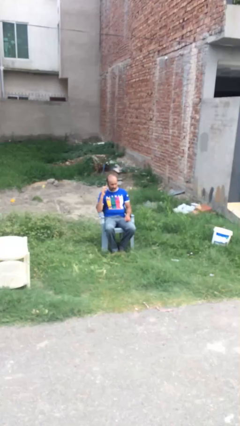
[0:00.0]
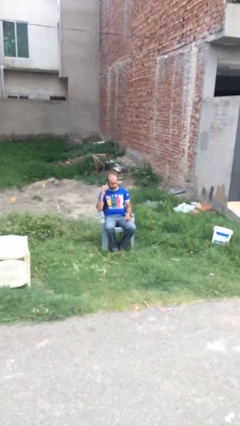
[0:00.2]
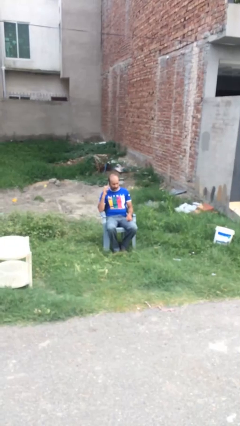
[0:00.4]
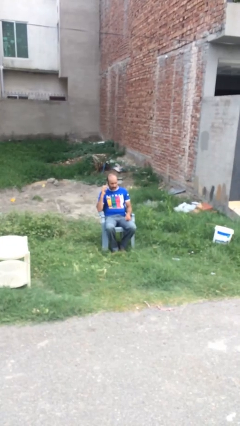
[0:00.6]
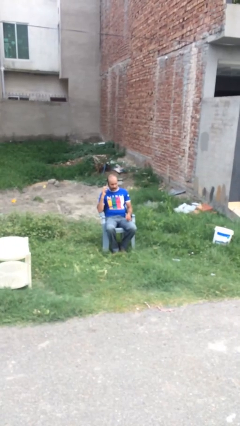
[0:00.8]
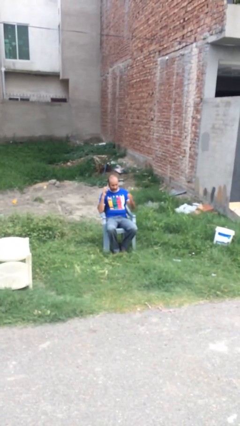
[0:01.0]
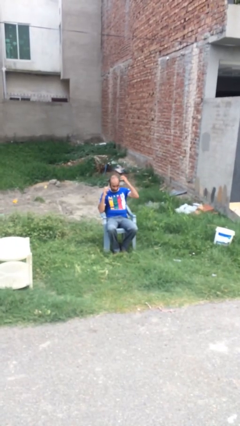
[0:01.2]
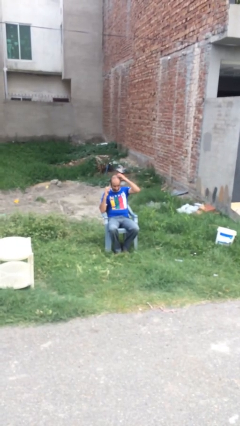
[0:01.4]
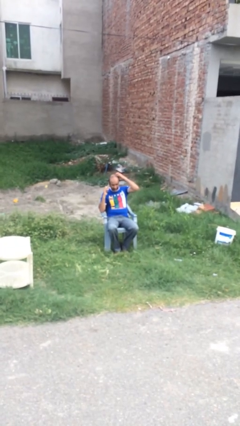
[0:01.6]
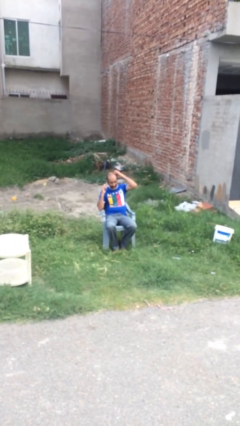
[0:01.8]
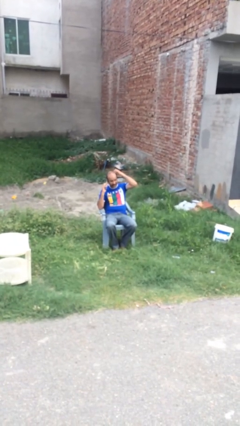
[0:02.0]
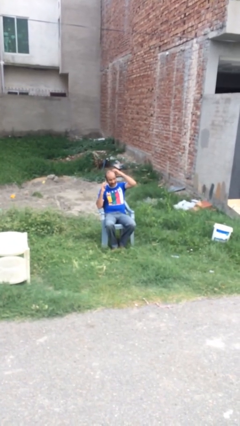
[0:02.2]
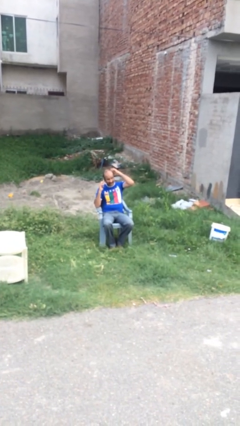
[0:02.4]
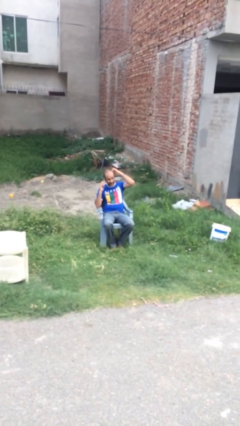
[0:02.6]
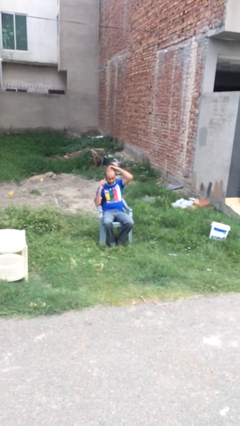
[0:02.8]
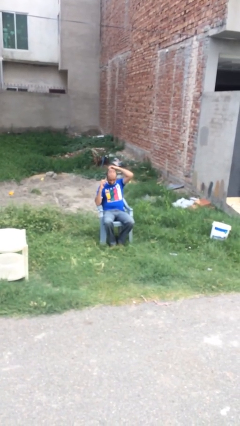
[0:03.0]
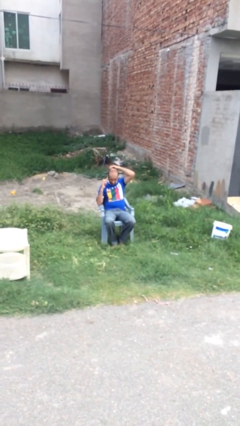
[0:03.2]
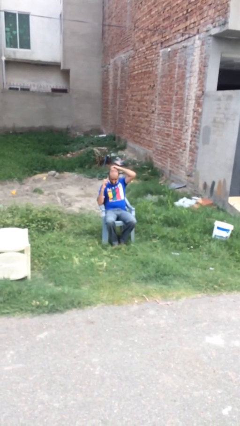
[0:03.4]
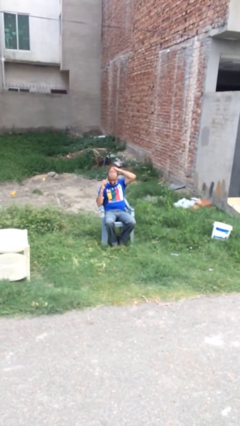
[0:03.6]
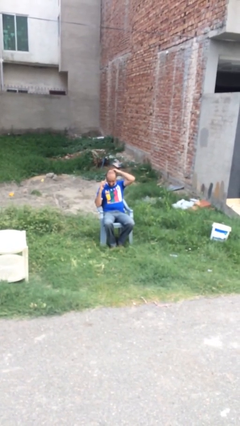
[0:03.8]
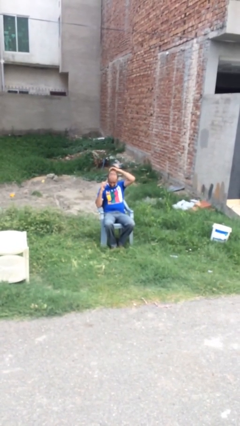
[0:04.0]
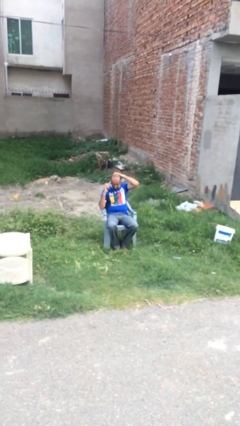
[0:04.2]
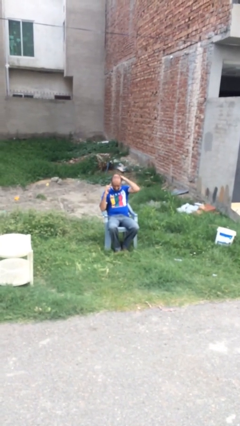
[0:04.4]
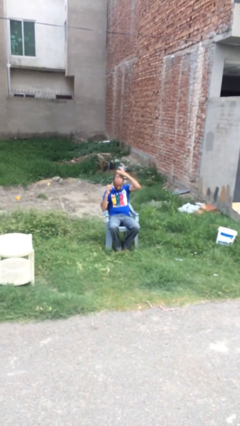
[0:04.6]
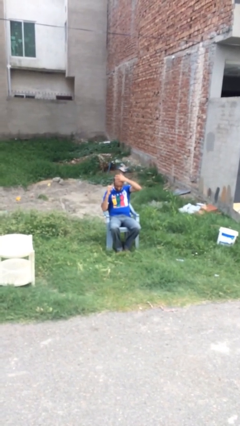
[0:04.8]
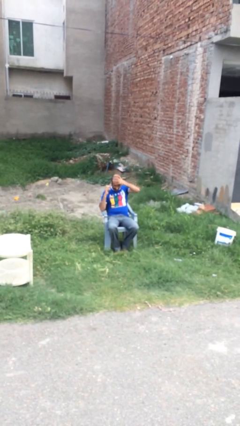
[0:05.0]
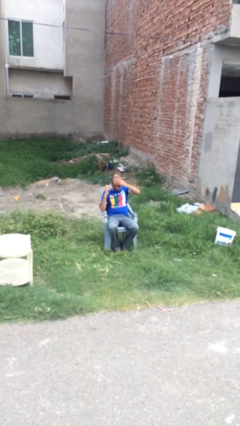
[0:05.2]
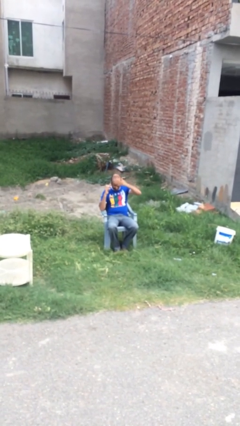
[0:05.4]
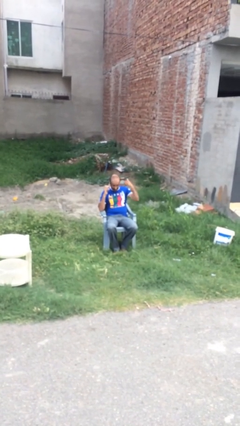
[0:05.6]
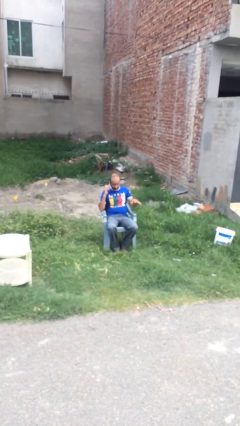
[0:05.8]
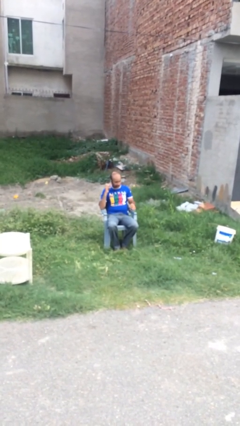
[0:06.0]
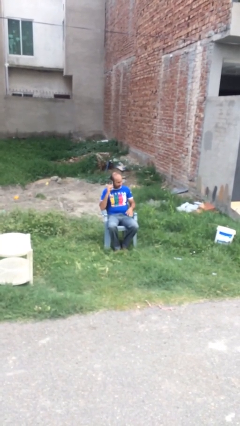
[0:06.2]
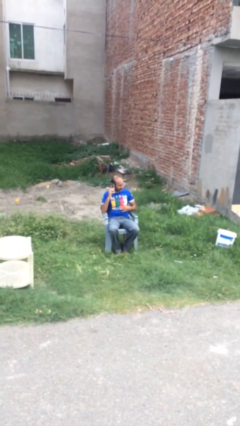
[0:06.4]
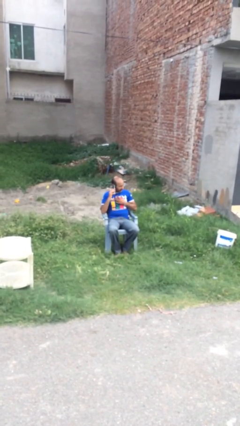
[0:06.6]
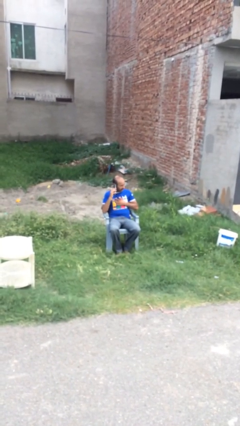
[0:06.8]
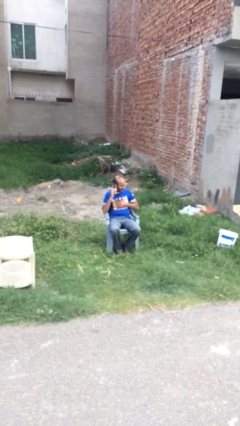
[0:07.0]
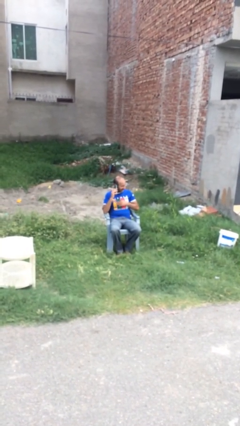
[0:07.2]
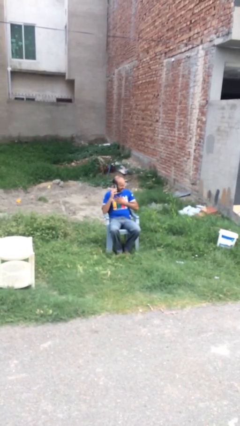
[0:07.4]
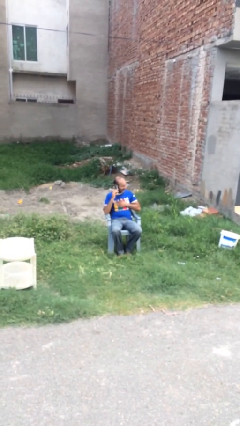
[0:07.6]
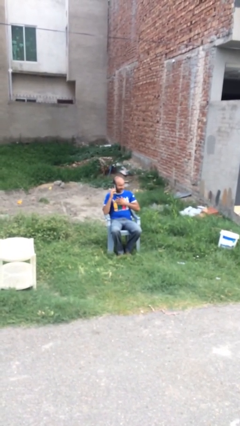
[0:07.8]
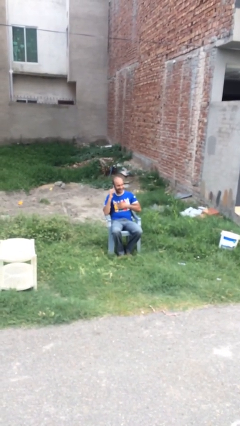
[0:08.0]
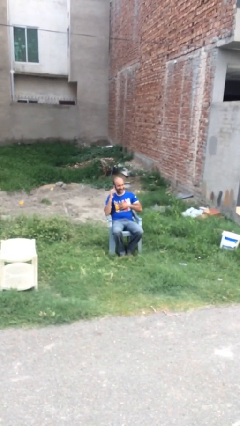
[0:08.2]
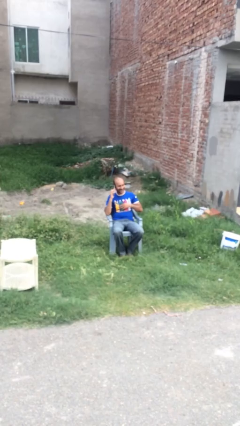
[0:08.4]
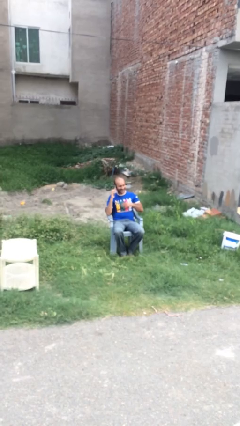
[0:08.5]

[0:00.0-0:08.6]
person talks on phone

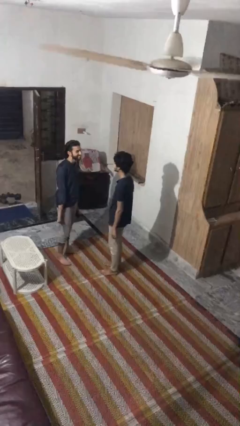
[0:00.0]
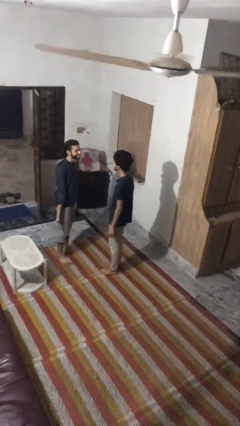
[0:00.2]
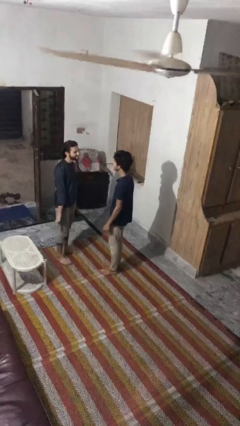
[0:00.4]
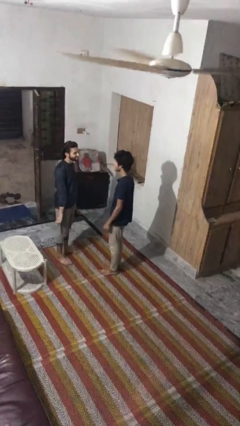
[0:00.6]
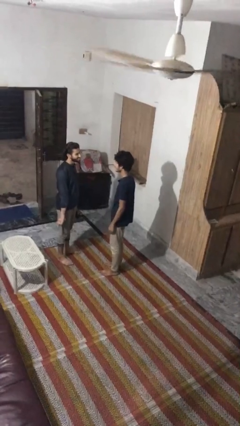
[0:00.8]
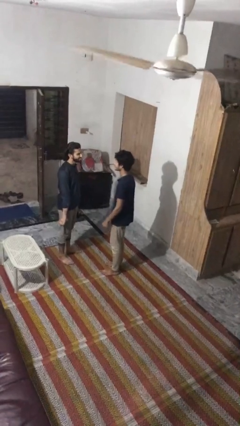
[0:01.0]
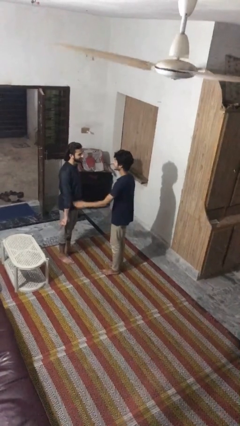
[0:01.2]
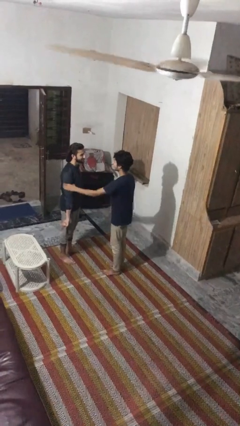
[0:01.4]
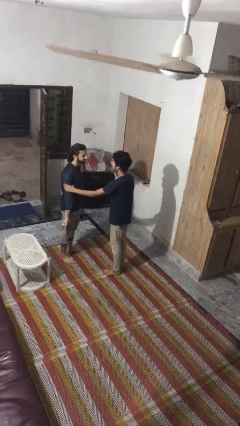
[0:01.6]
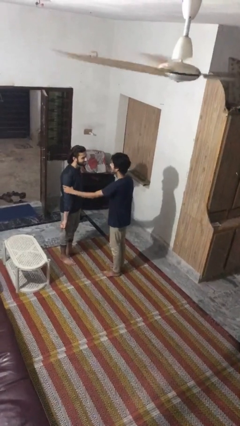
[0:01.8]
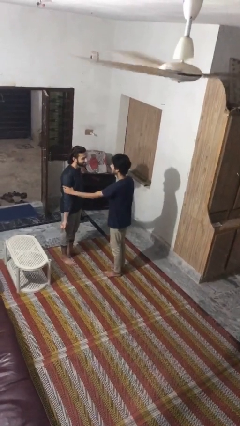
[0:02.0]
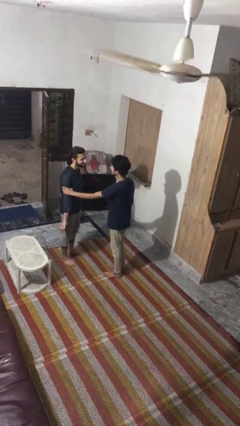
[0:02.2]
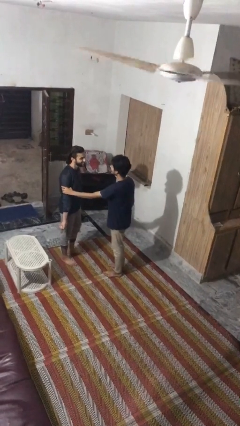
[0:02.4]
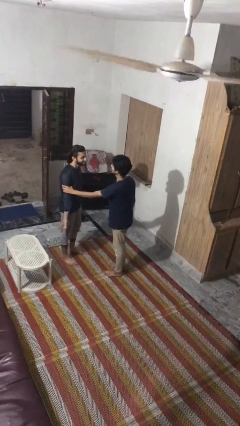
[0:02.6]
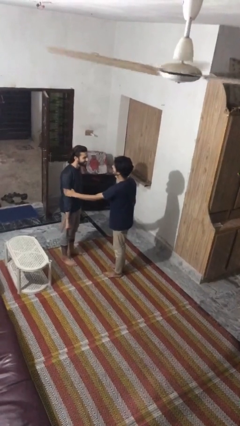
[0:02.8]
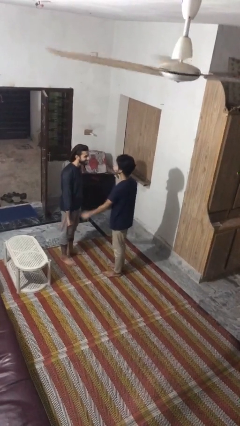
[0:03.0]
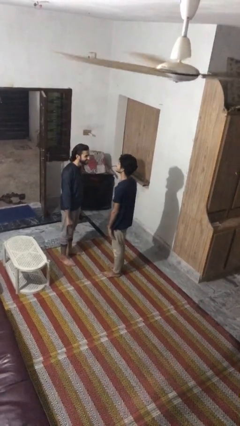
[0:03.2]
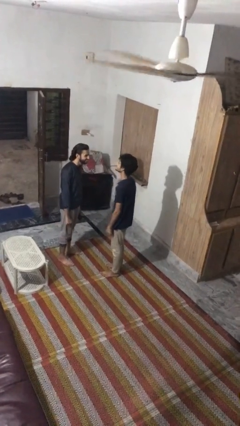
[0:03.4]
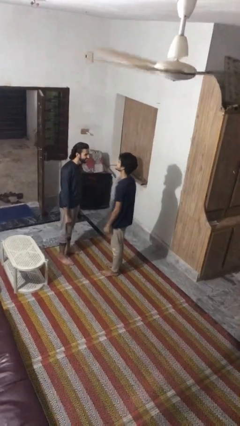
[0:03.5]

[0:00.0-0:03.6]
person grabs person by bicep

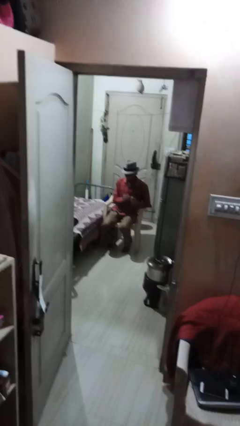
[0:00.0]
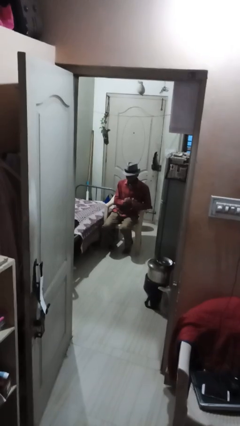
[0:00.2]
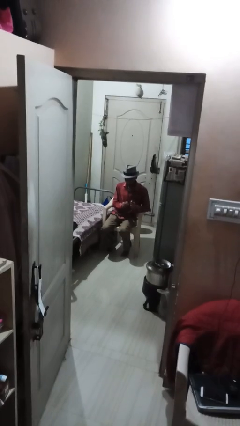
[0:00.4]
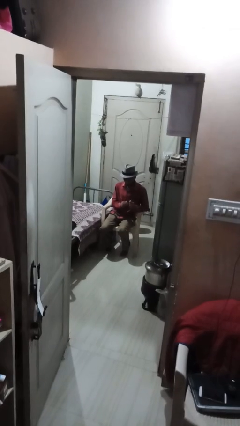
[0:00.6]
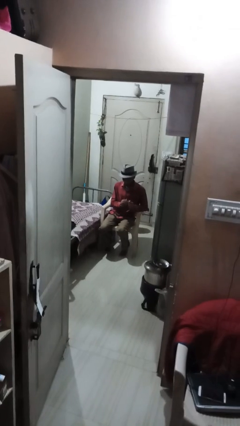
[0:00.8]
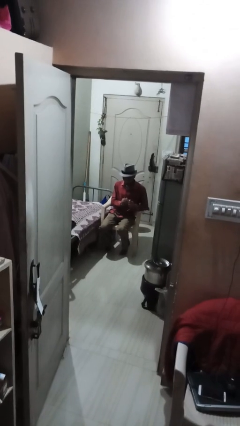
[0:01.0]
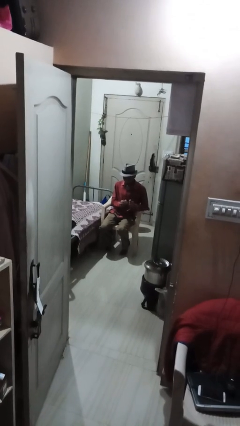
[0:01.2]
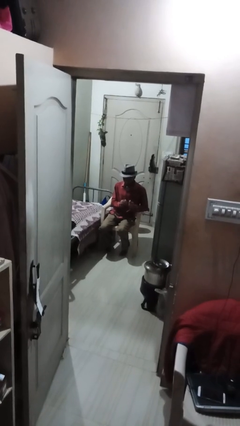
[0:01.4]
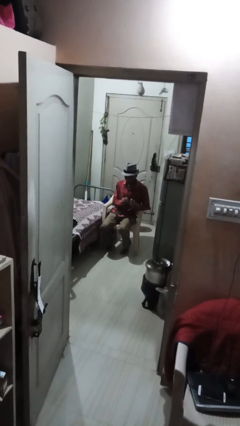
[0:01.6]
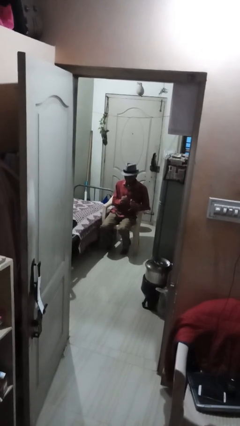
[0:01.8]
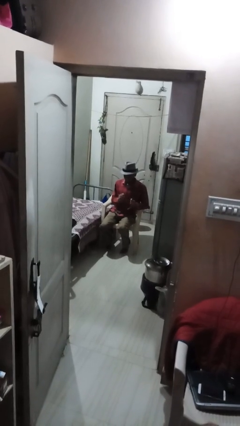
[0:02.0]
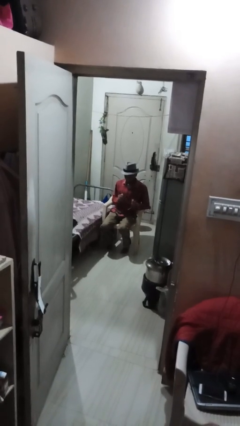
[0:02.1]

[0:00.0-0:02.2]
person files fingernails

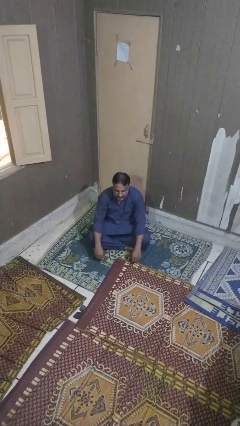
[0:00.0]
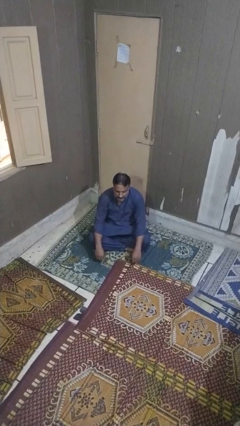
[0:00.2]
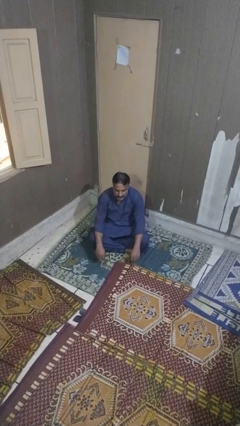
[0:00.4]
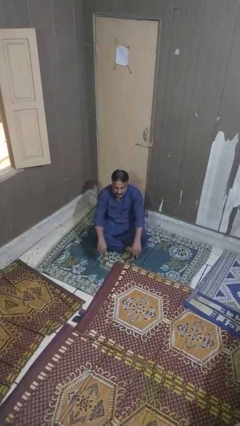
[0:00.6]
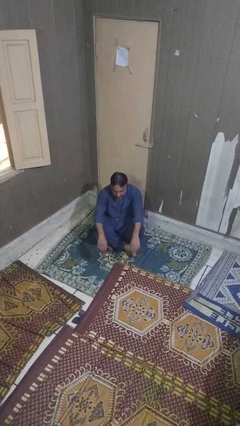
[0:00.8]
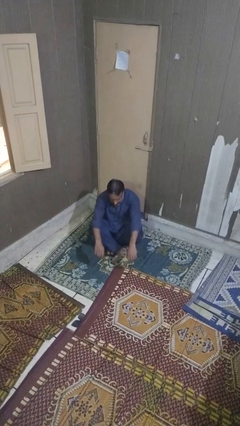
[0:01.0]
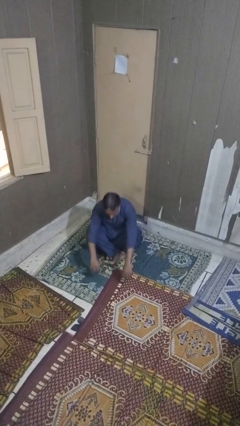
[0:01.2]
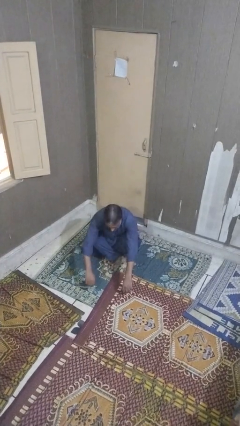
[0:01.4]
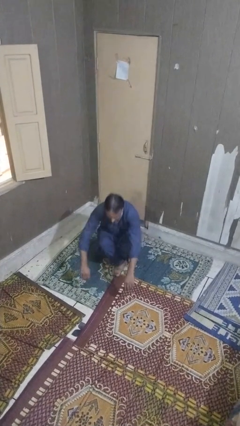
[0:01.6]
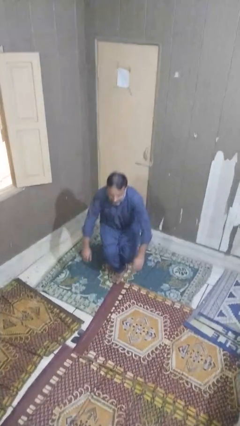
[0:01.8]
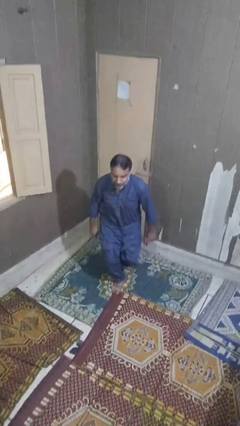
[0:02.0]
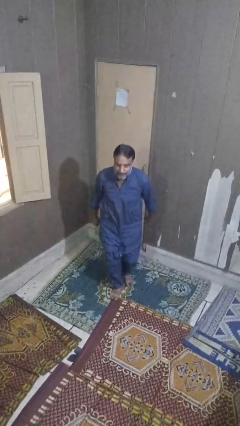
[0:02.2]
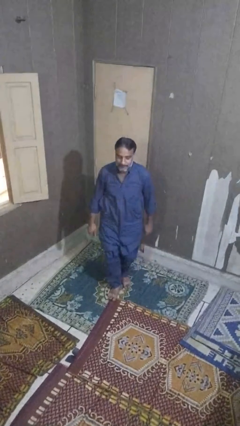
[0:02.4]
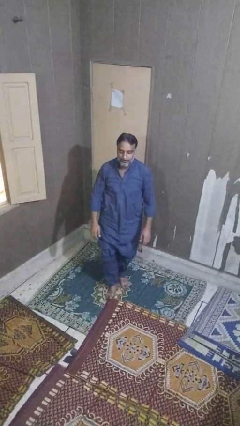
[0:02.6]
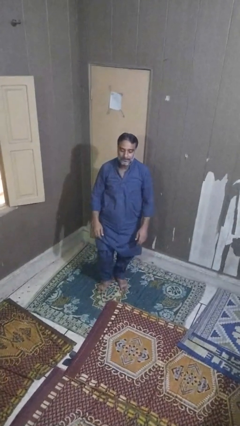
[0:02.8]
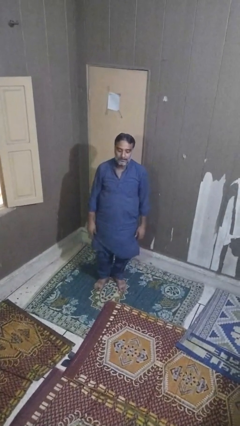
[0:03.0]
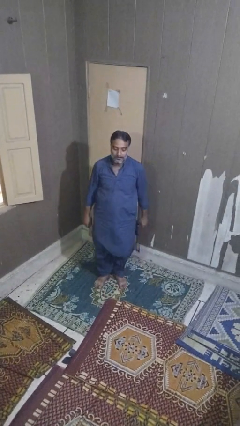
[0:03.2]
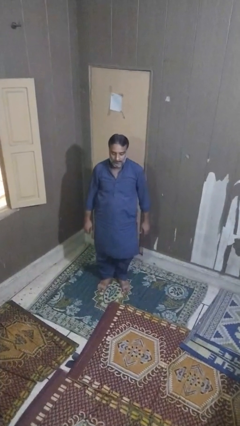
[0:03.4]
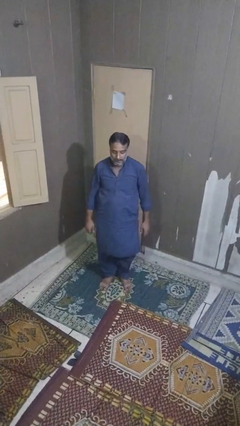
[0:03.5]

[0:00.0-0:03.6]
person stands up from floor
